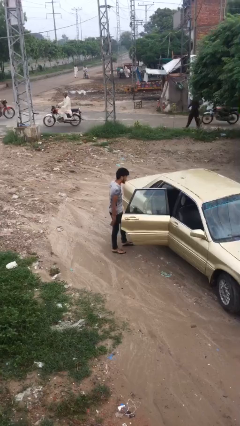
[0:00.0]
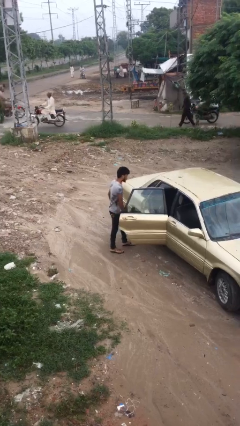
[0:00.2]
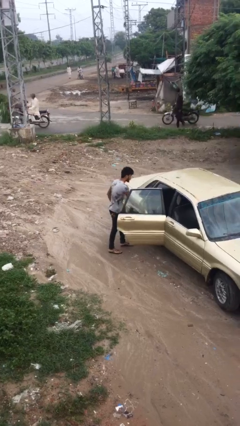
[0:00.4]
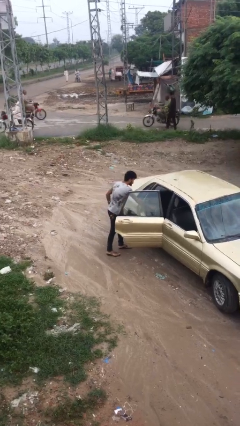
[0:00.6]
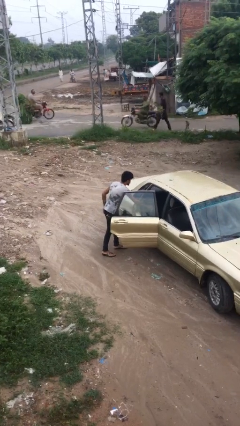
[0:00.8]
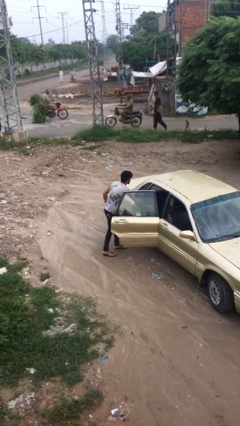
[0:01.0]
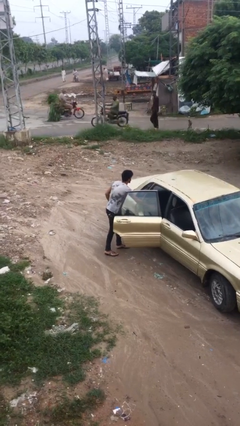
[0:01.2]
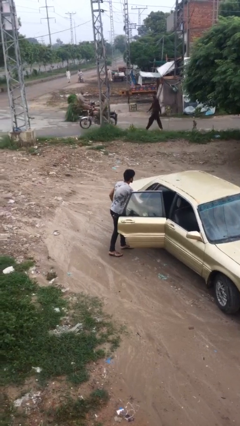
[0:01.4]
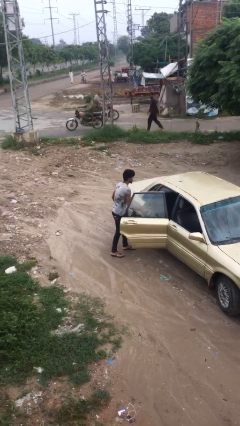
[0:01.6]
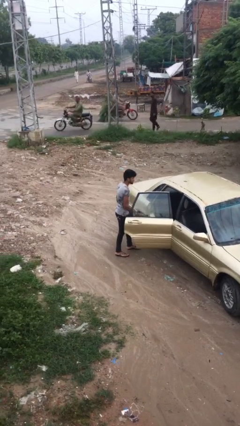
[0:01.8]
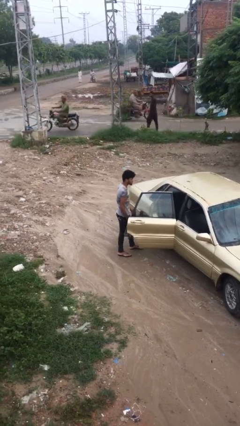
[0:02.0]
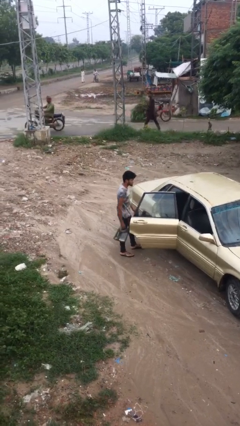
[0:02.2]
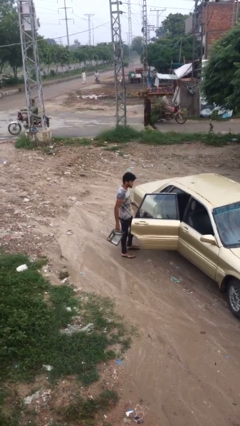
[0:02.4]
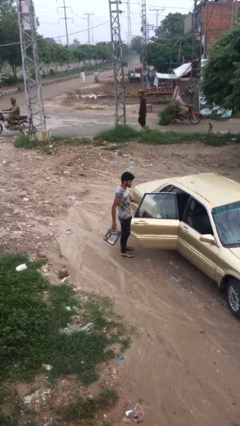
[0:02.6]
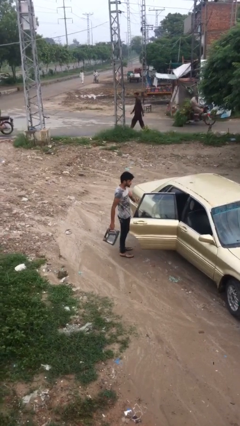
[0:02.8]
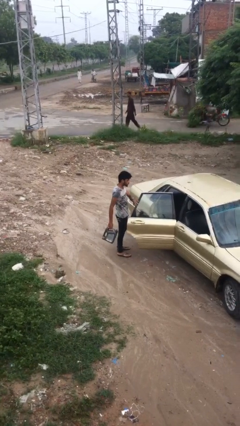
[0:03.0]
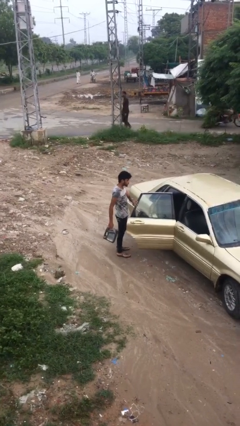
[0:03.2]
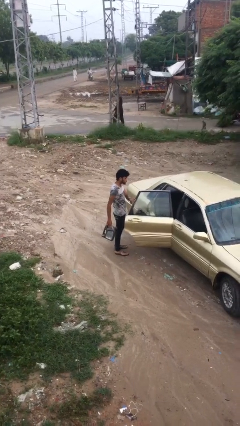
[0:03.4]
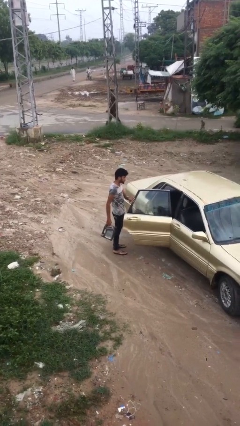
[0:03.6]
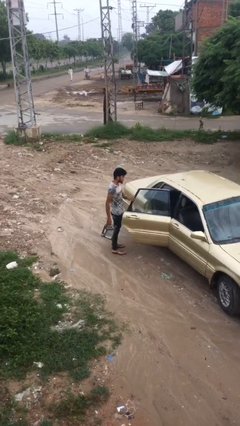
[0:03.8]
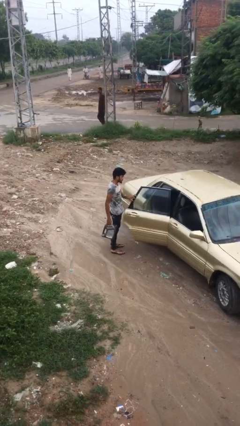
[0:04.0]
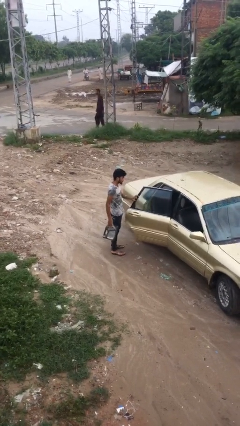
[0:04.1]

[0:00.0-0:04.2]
person unloads car

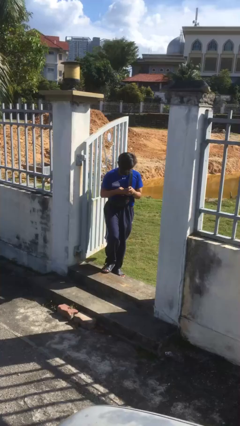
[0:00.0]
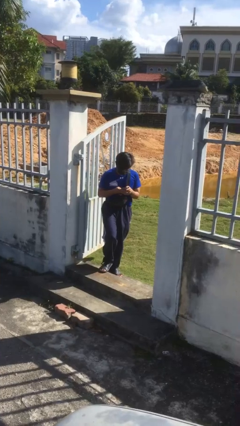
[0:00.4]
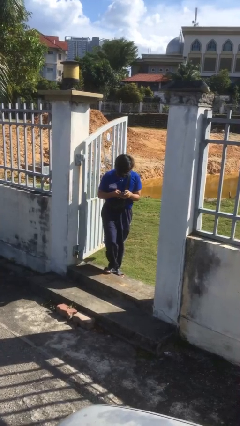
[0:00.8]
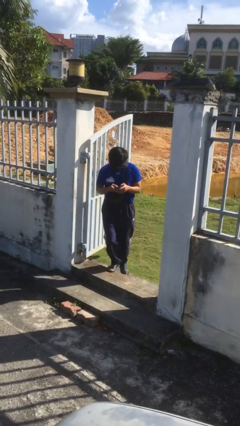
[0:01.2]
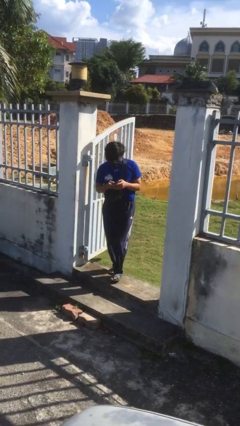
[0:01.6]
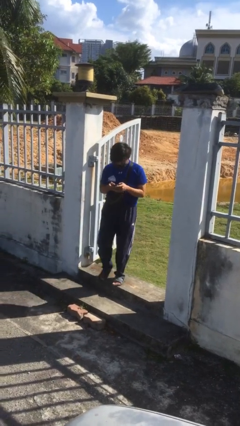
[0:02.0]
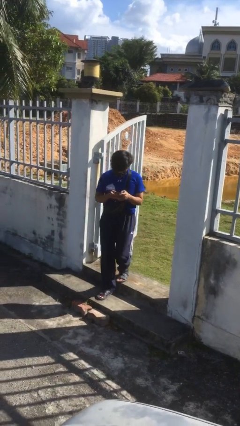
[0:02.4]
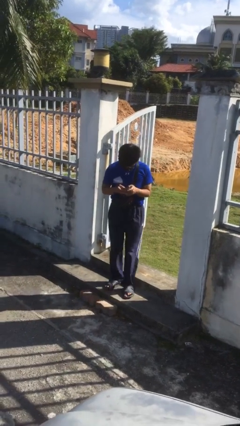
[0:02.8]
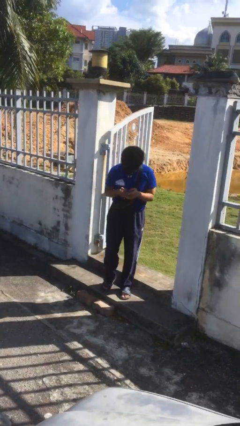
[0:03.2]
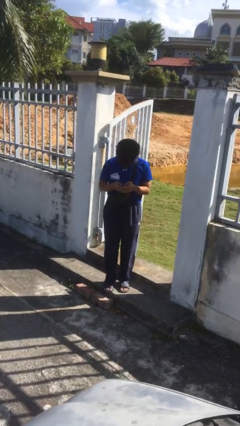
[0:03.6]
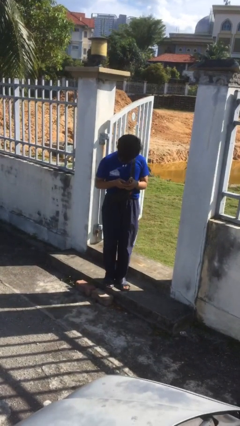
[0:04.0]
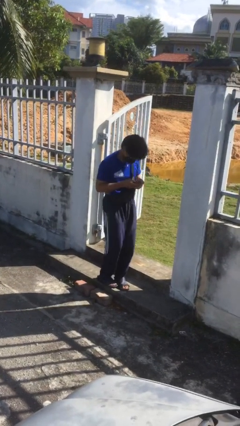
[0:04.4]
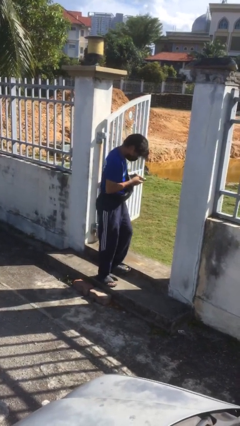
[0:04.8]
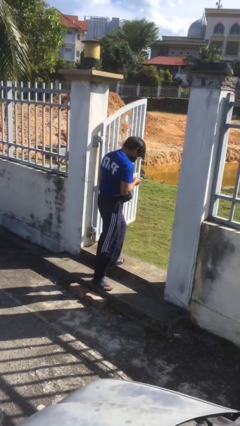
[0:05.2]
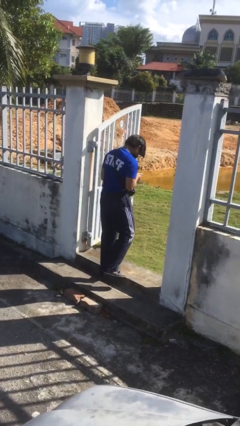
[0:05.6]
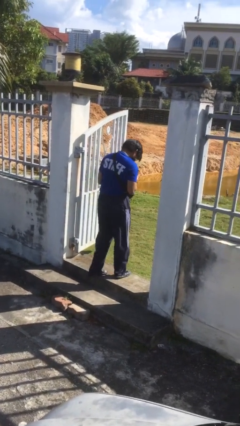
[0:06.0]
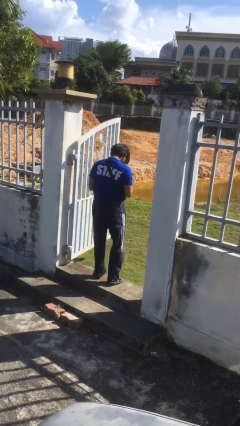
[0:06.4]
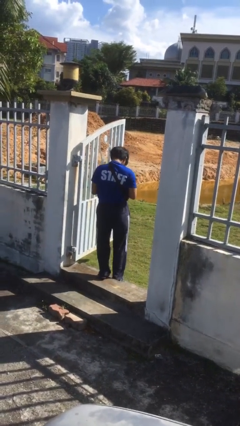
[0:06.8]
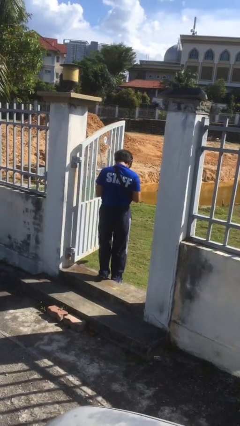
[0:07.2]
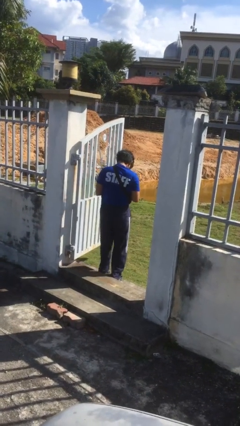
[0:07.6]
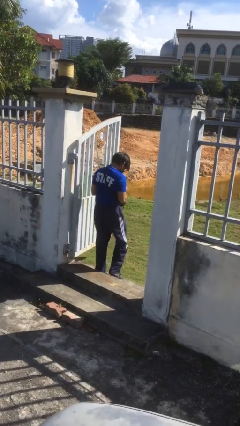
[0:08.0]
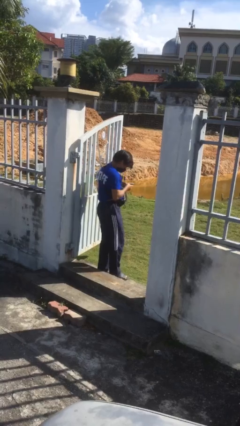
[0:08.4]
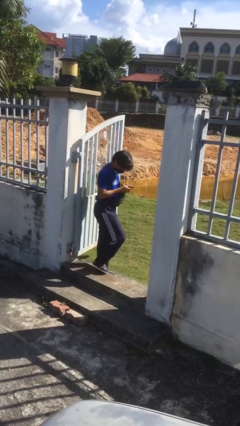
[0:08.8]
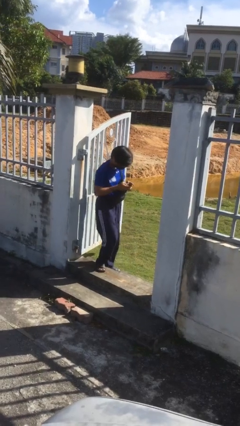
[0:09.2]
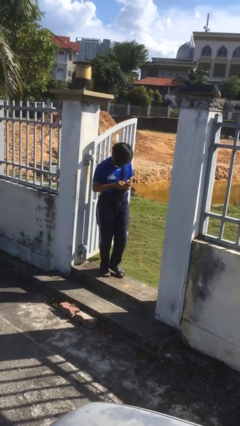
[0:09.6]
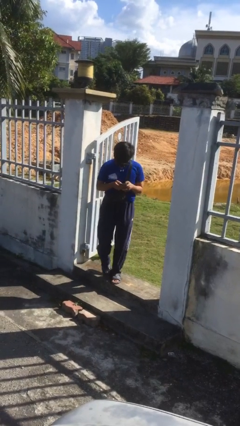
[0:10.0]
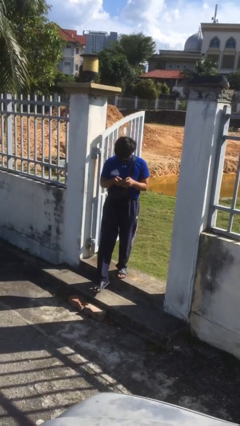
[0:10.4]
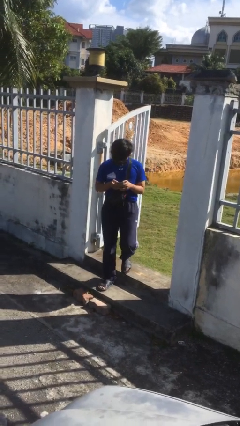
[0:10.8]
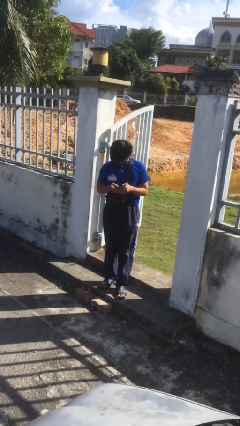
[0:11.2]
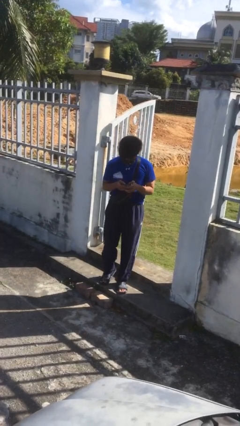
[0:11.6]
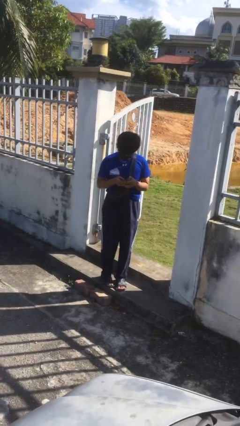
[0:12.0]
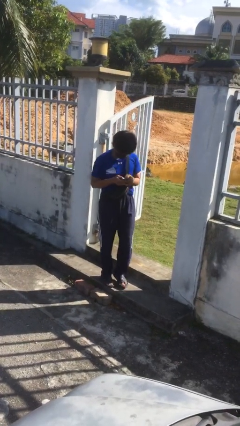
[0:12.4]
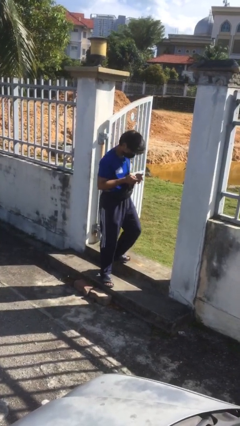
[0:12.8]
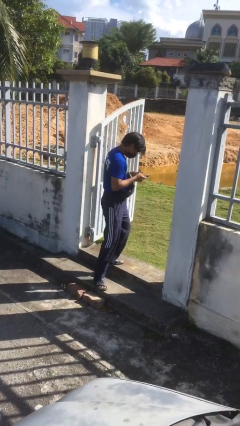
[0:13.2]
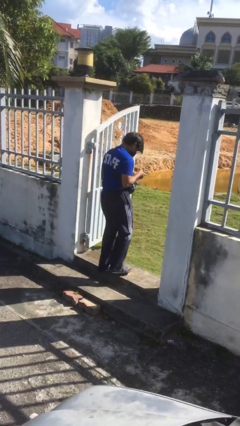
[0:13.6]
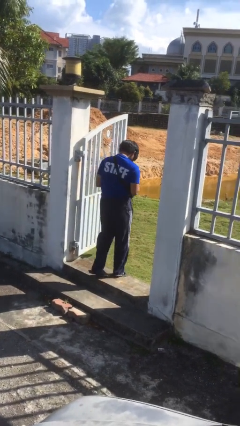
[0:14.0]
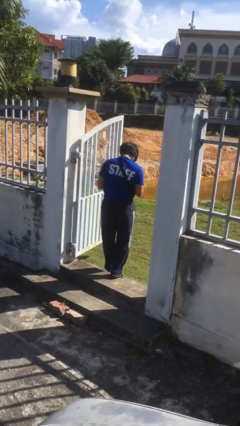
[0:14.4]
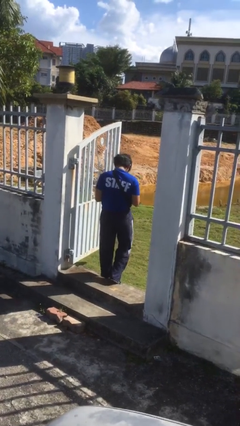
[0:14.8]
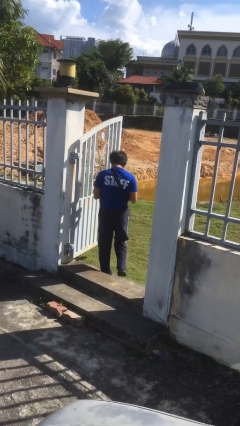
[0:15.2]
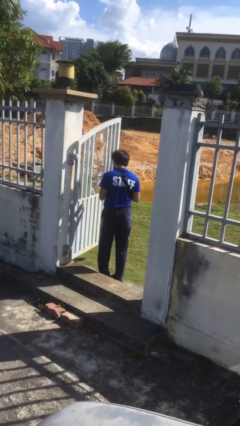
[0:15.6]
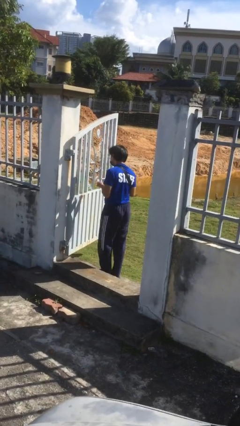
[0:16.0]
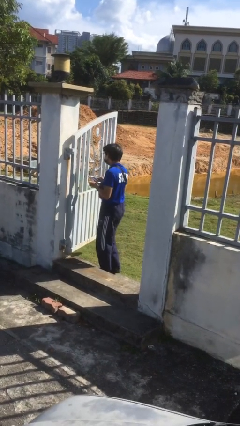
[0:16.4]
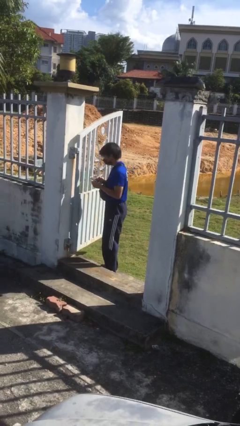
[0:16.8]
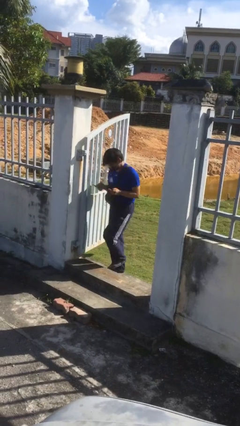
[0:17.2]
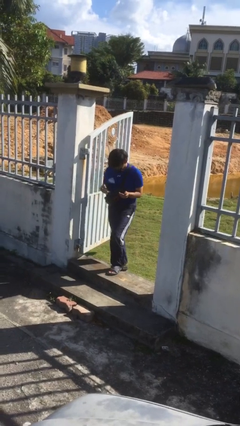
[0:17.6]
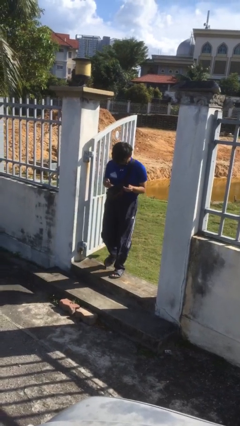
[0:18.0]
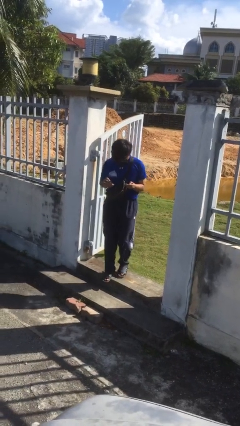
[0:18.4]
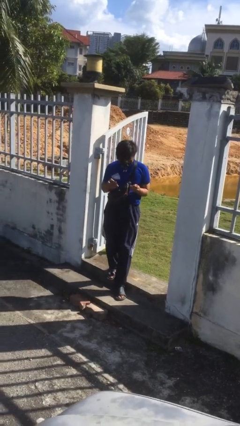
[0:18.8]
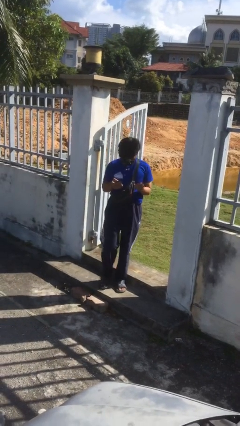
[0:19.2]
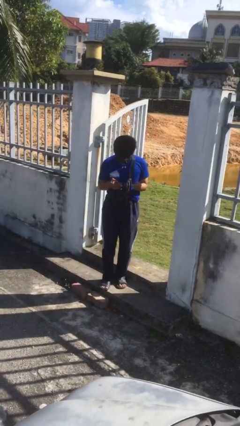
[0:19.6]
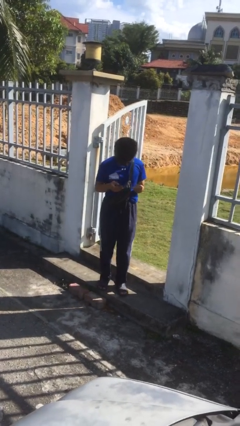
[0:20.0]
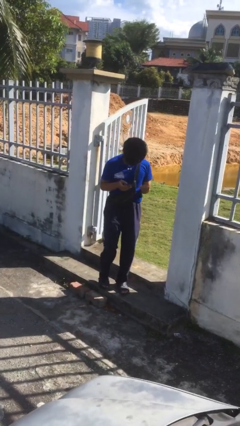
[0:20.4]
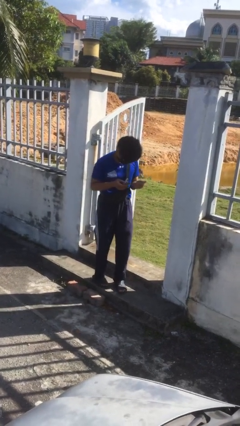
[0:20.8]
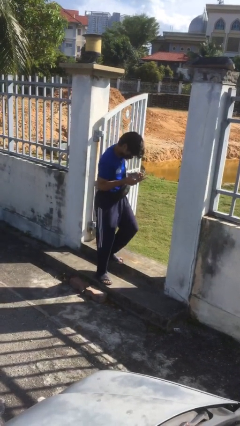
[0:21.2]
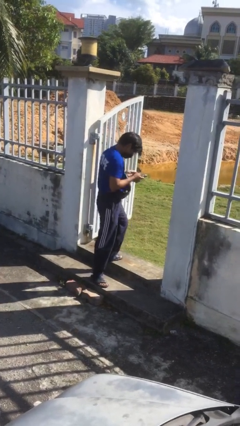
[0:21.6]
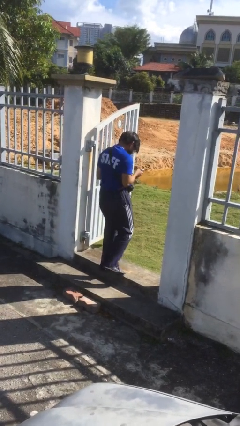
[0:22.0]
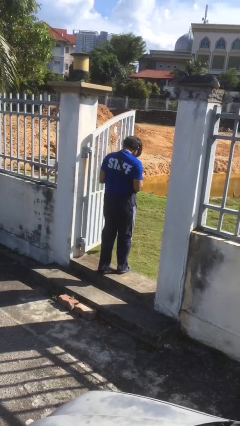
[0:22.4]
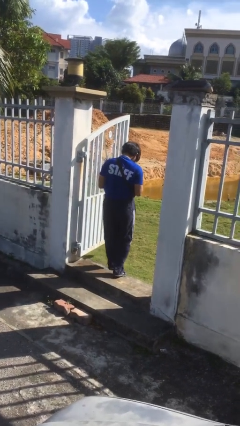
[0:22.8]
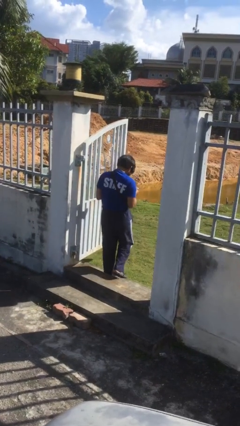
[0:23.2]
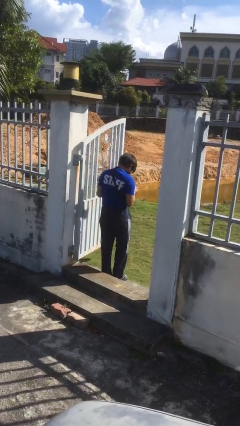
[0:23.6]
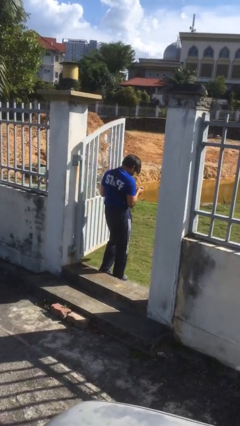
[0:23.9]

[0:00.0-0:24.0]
person texts on phone

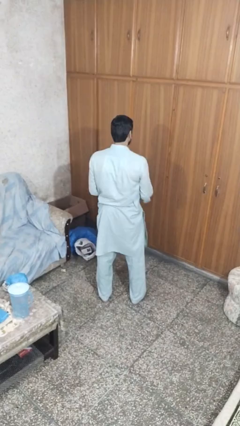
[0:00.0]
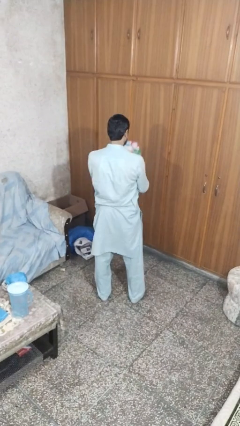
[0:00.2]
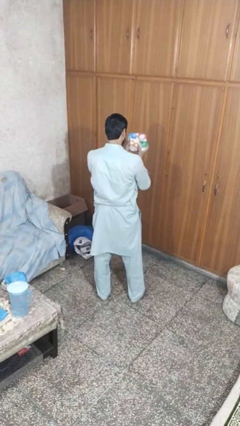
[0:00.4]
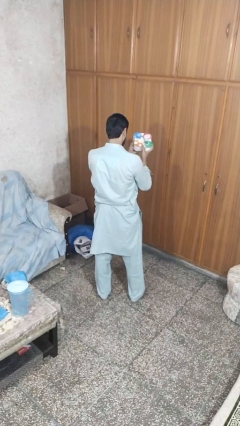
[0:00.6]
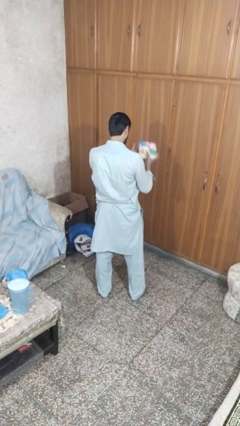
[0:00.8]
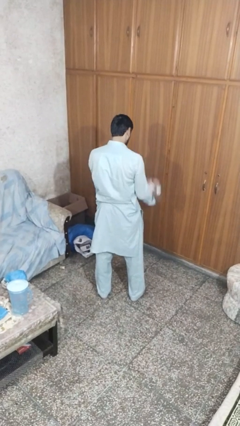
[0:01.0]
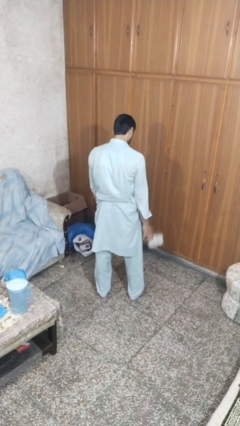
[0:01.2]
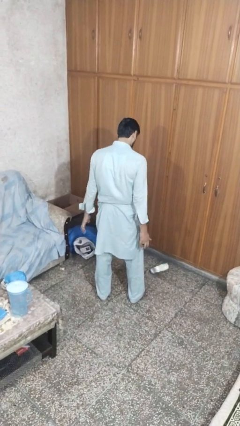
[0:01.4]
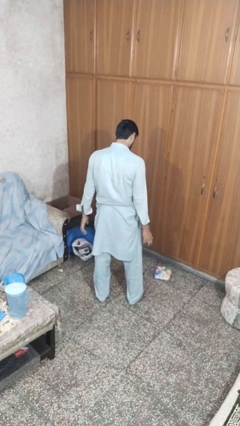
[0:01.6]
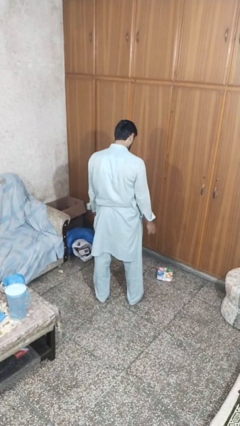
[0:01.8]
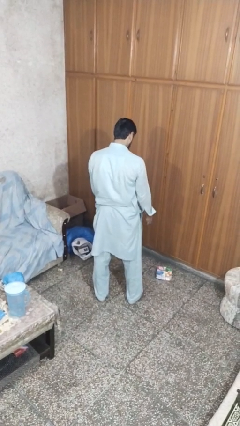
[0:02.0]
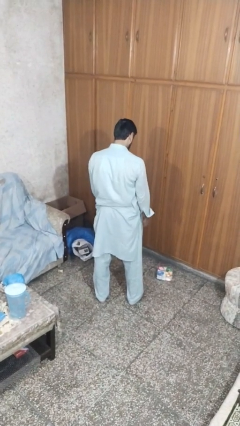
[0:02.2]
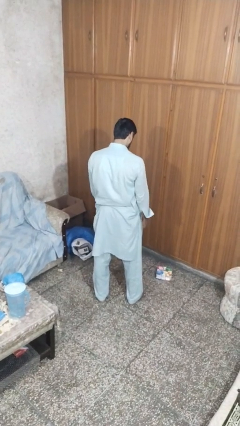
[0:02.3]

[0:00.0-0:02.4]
person catches dropped object
